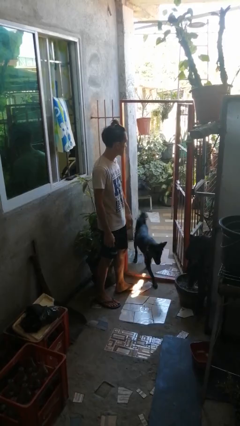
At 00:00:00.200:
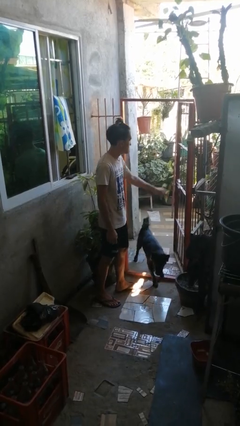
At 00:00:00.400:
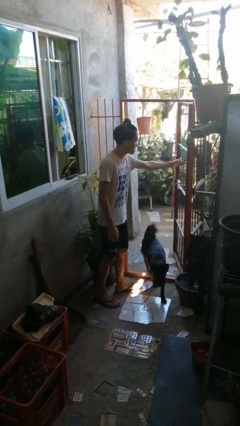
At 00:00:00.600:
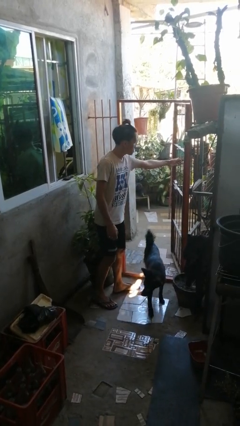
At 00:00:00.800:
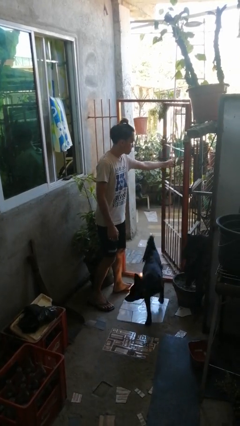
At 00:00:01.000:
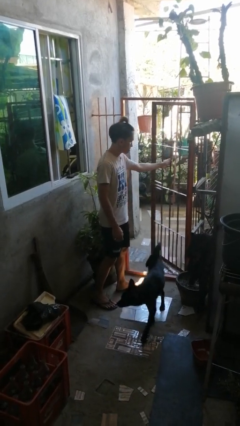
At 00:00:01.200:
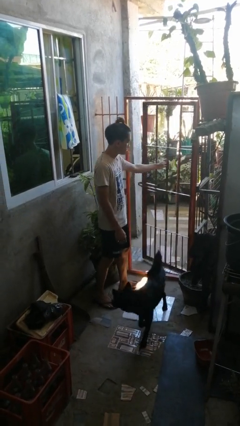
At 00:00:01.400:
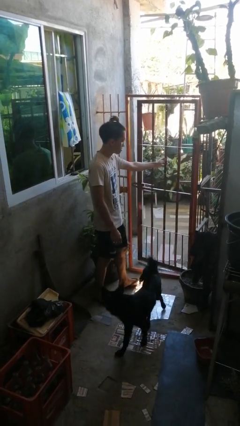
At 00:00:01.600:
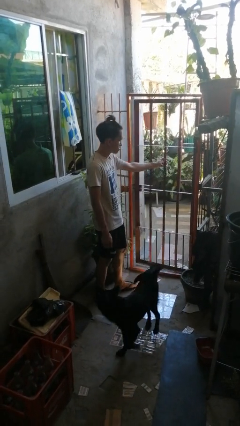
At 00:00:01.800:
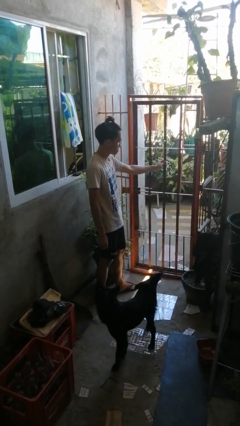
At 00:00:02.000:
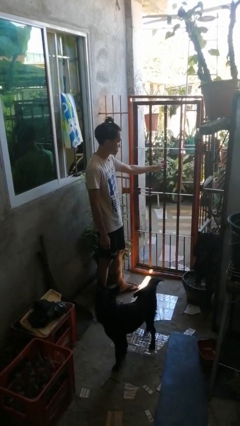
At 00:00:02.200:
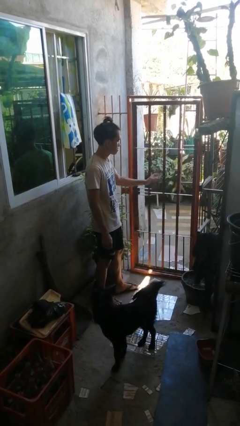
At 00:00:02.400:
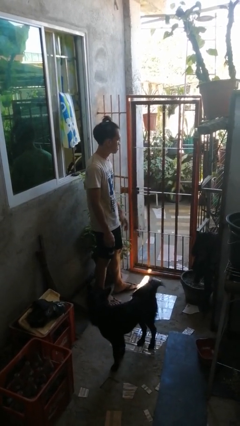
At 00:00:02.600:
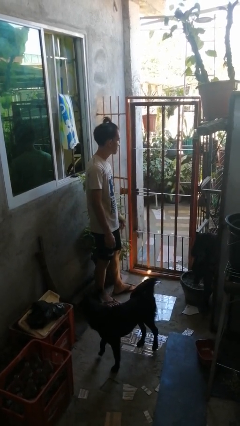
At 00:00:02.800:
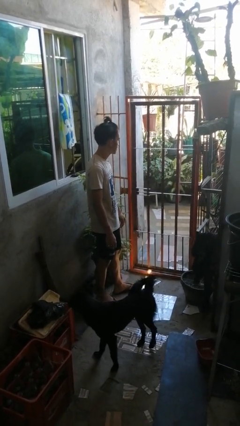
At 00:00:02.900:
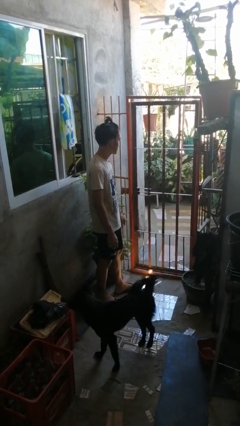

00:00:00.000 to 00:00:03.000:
person closes gate

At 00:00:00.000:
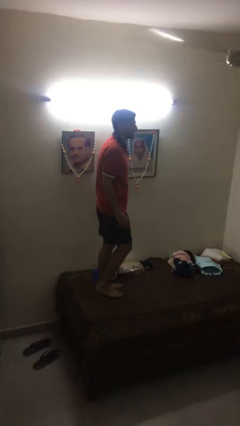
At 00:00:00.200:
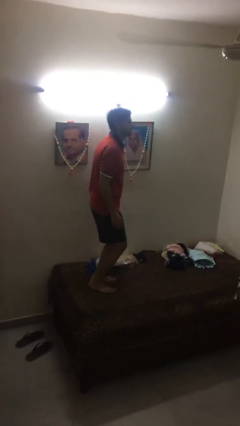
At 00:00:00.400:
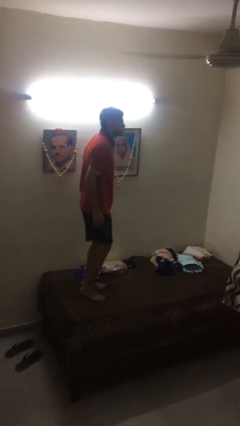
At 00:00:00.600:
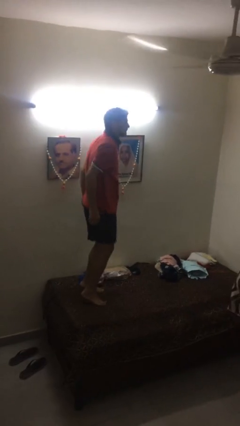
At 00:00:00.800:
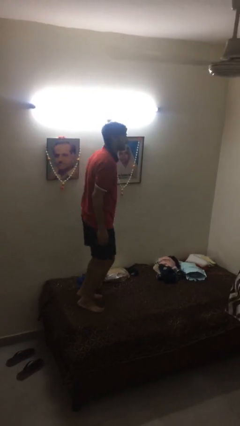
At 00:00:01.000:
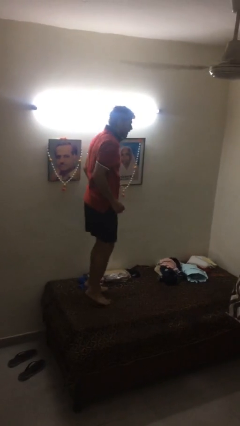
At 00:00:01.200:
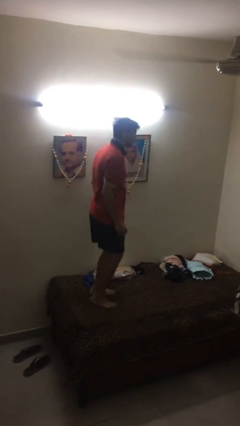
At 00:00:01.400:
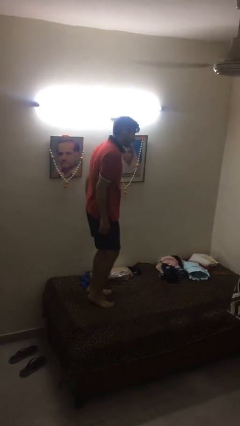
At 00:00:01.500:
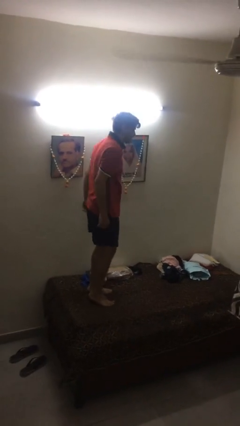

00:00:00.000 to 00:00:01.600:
person jumps on bed

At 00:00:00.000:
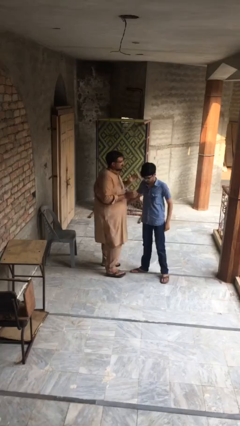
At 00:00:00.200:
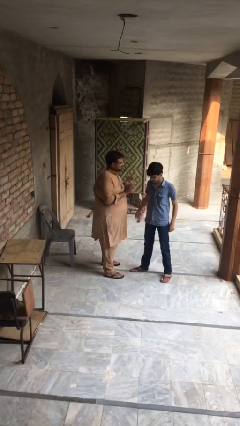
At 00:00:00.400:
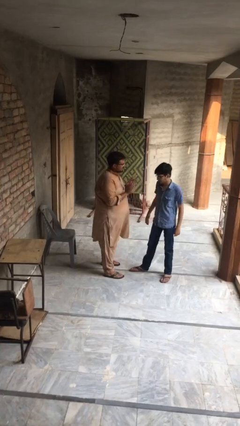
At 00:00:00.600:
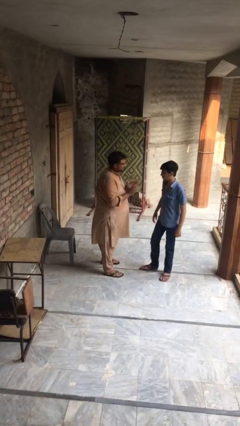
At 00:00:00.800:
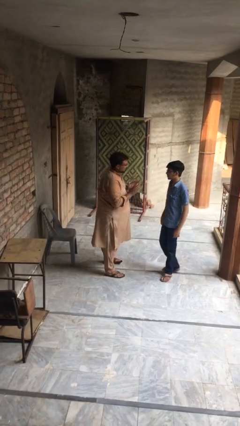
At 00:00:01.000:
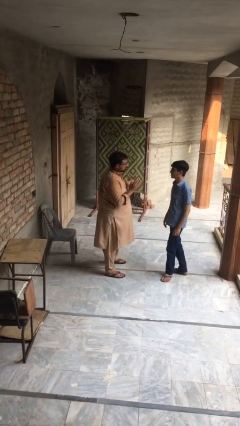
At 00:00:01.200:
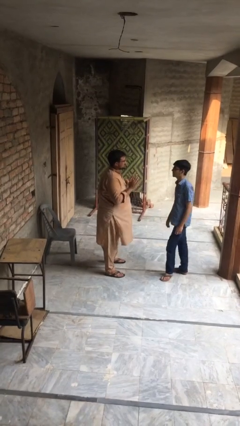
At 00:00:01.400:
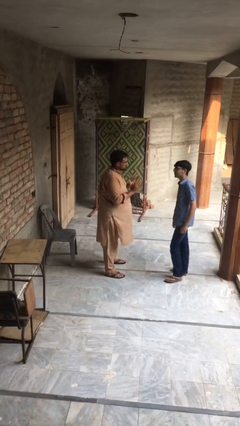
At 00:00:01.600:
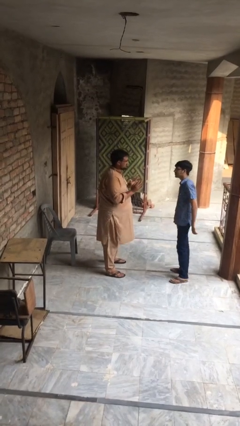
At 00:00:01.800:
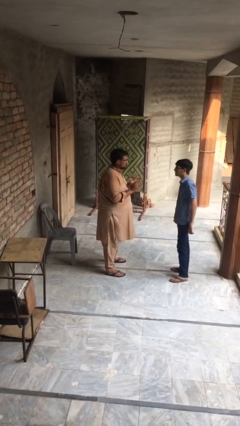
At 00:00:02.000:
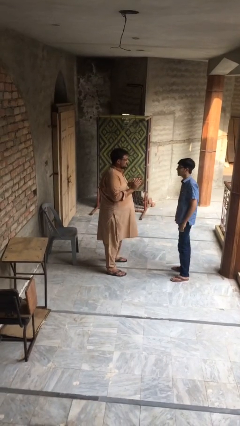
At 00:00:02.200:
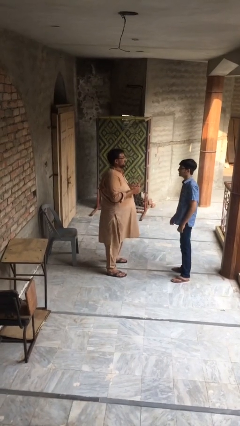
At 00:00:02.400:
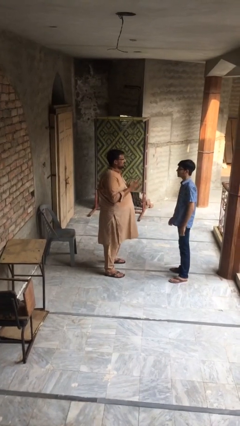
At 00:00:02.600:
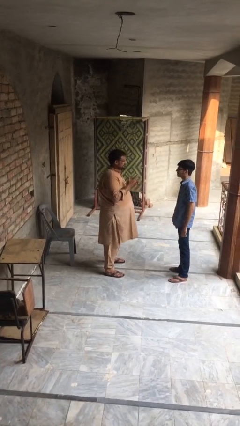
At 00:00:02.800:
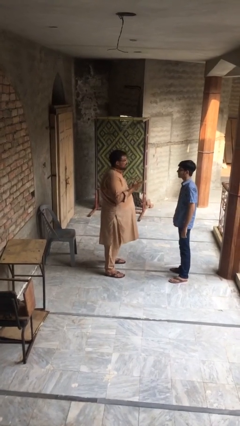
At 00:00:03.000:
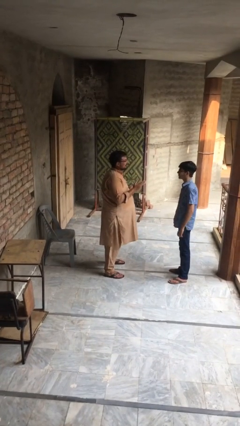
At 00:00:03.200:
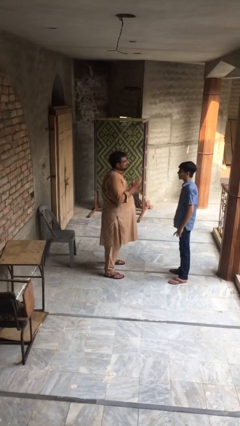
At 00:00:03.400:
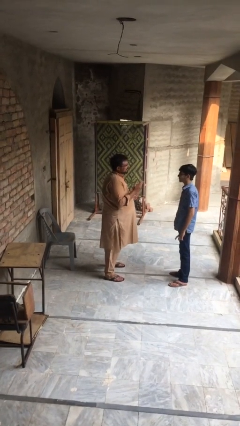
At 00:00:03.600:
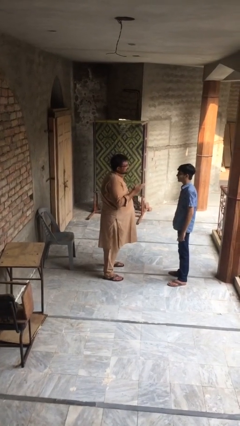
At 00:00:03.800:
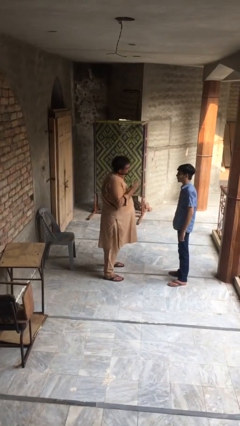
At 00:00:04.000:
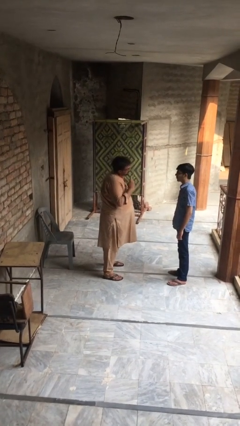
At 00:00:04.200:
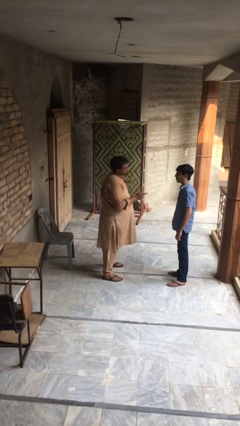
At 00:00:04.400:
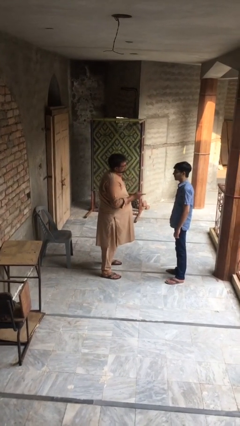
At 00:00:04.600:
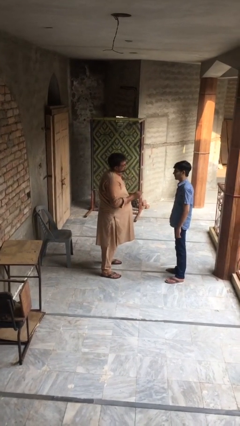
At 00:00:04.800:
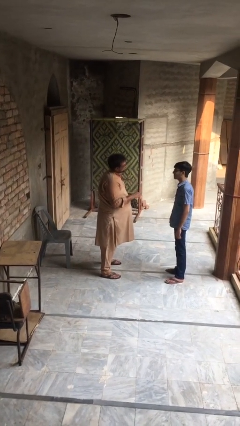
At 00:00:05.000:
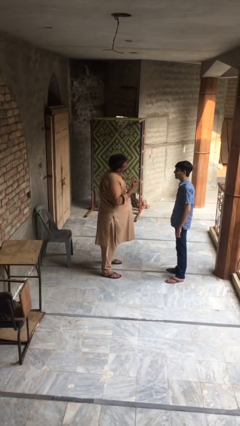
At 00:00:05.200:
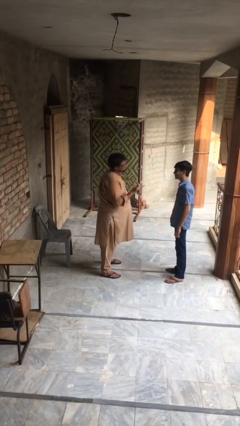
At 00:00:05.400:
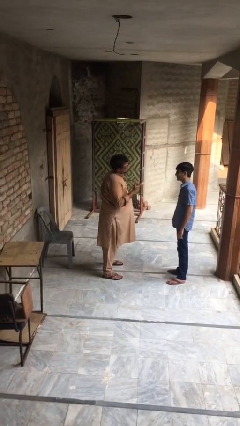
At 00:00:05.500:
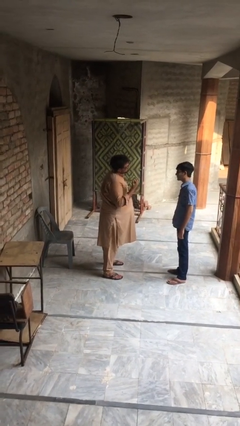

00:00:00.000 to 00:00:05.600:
person talks to person

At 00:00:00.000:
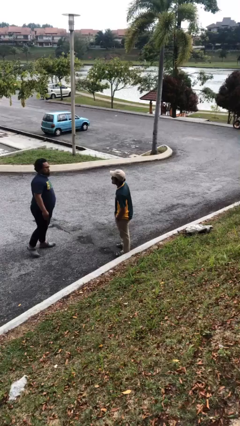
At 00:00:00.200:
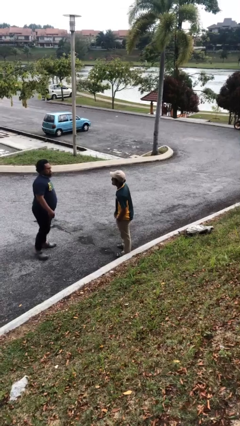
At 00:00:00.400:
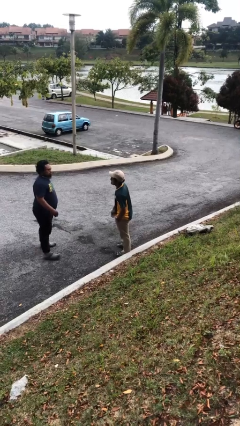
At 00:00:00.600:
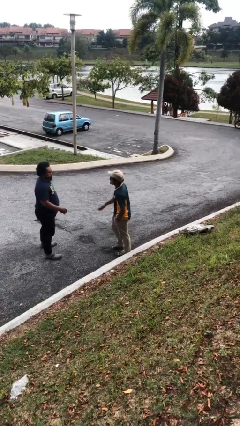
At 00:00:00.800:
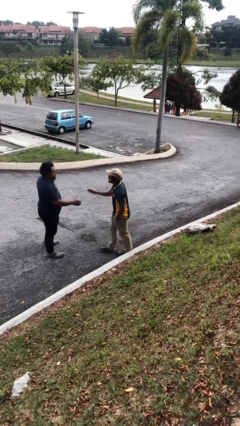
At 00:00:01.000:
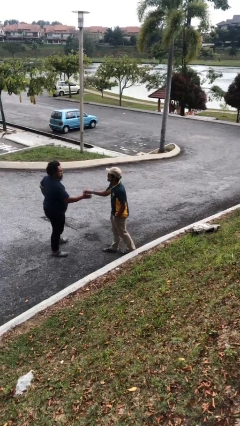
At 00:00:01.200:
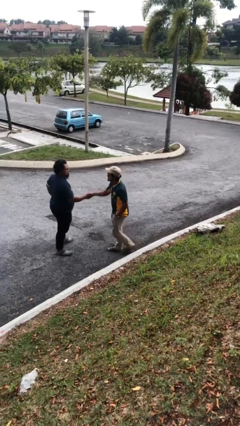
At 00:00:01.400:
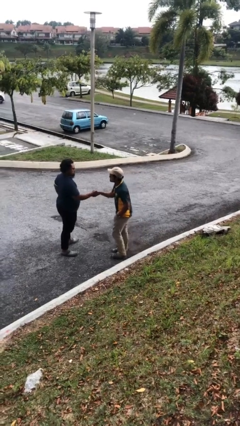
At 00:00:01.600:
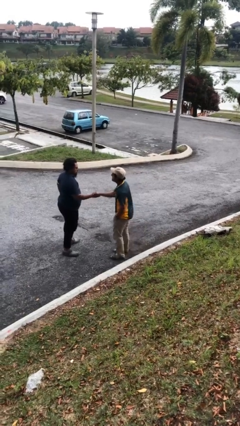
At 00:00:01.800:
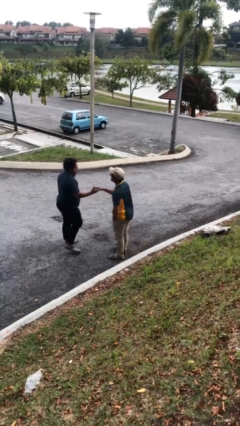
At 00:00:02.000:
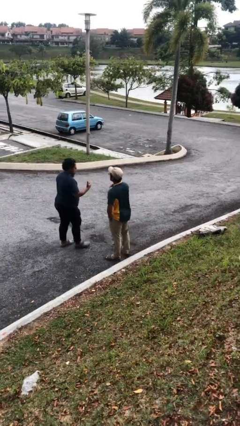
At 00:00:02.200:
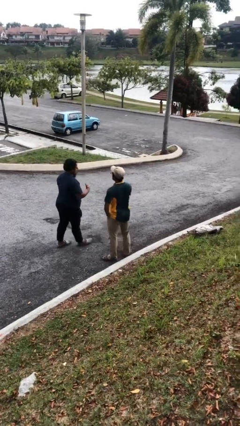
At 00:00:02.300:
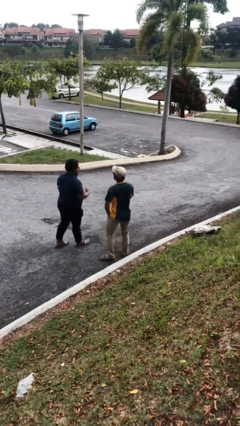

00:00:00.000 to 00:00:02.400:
person shakes hand

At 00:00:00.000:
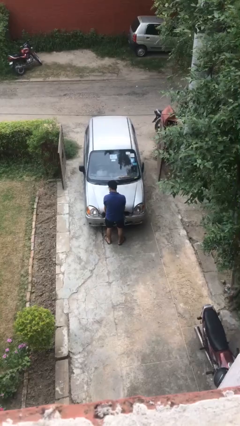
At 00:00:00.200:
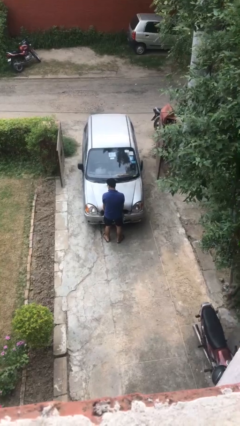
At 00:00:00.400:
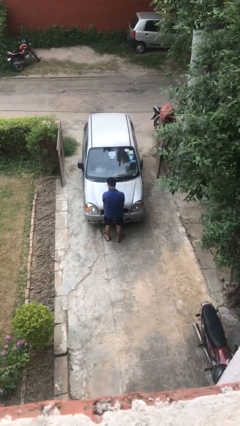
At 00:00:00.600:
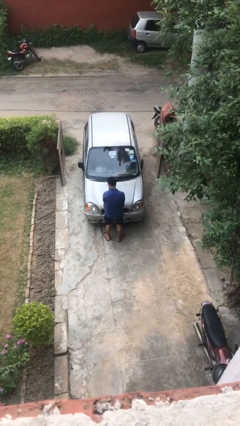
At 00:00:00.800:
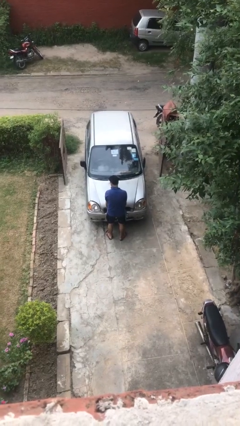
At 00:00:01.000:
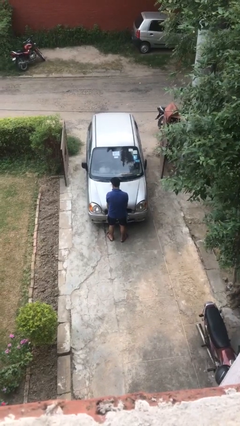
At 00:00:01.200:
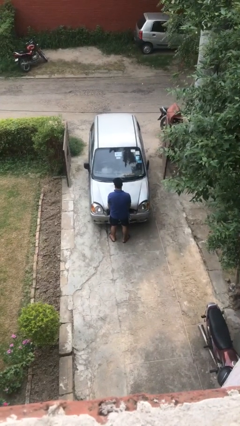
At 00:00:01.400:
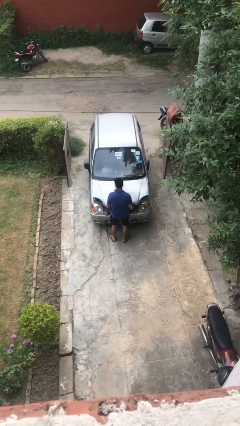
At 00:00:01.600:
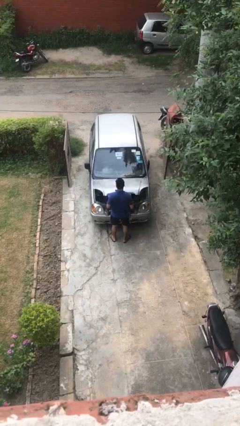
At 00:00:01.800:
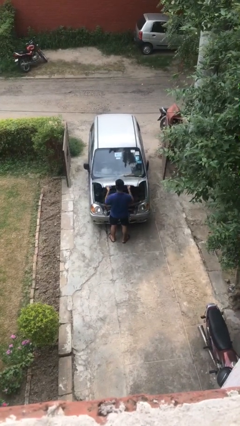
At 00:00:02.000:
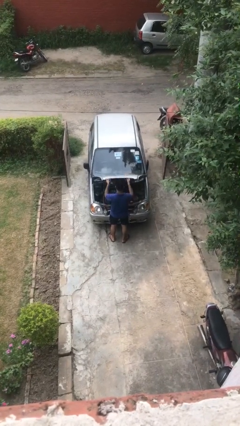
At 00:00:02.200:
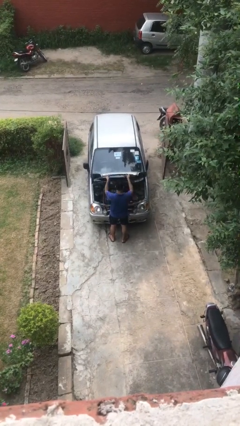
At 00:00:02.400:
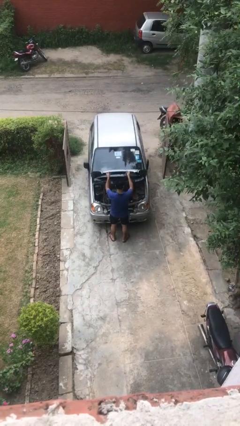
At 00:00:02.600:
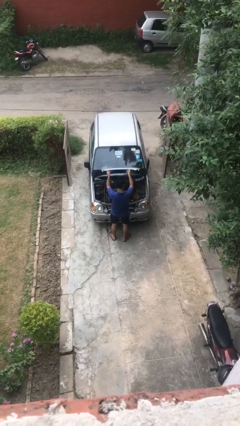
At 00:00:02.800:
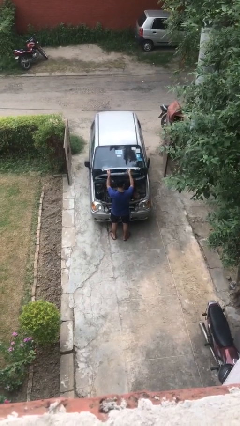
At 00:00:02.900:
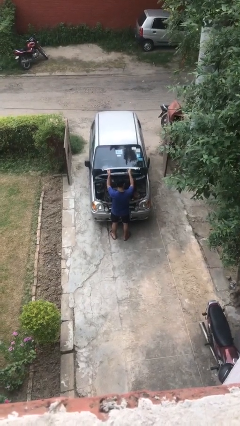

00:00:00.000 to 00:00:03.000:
person opens car hood

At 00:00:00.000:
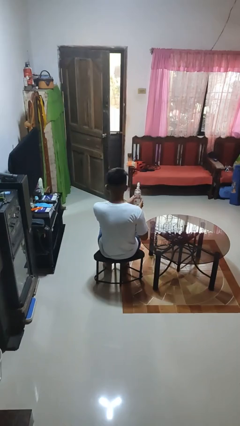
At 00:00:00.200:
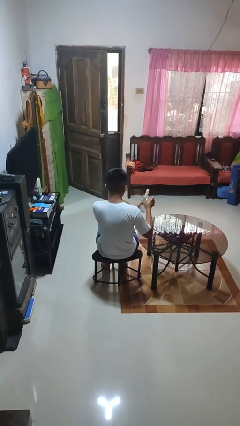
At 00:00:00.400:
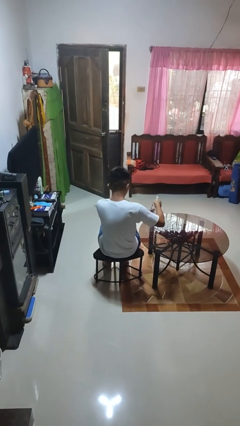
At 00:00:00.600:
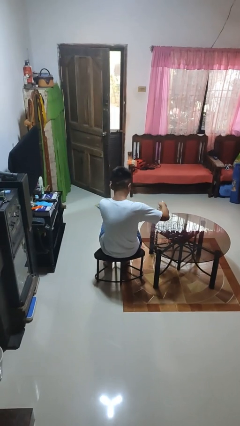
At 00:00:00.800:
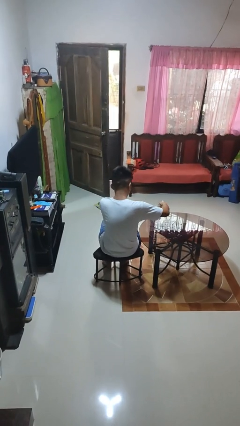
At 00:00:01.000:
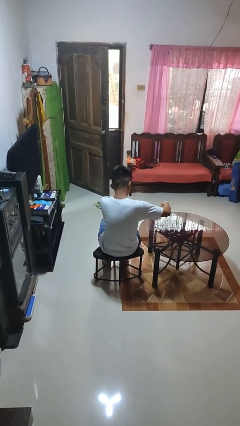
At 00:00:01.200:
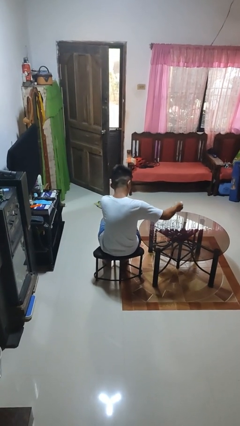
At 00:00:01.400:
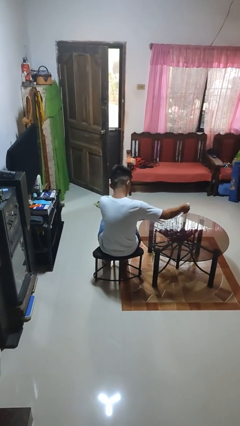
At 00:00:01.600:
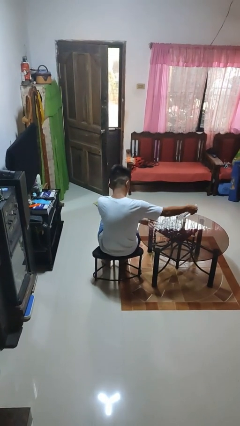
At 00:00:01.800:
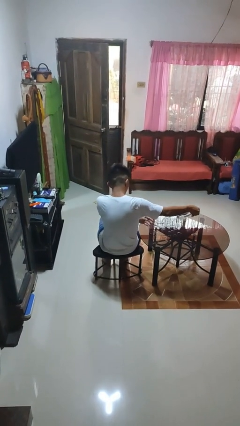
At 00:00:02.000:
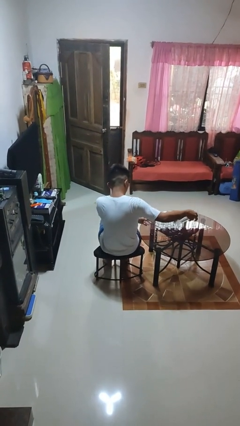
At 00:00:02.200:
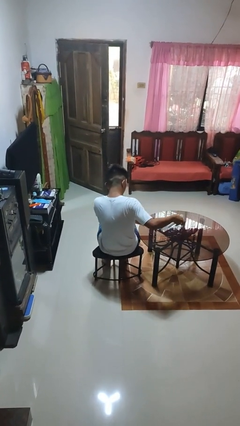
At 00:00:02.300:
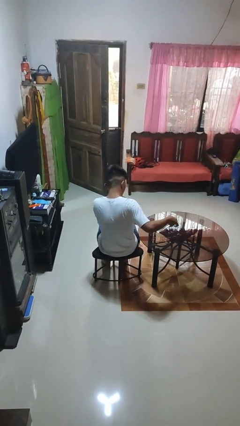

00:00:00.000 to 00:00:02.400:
person sprays from bottle
